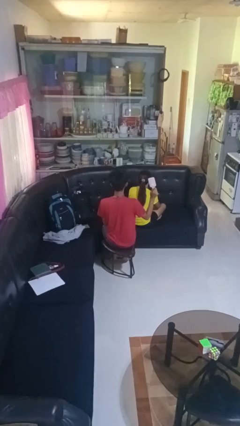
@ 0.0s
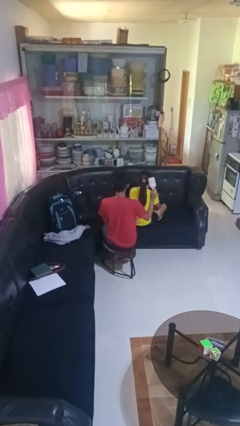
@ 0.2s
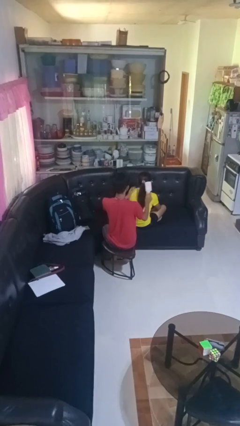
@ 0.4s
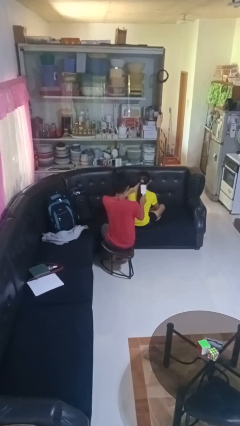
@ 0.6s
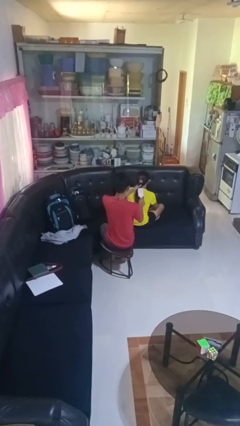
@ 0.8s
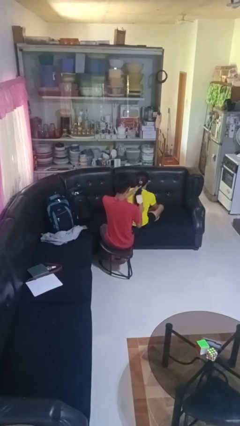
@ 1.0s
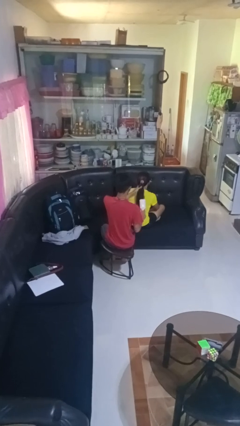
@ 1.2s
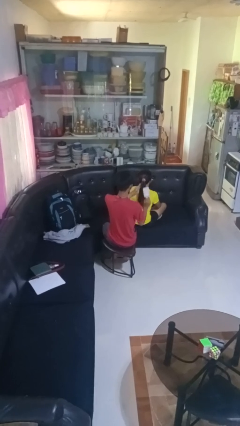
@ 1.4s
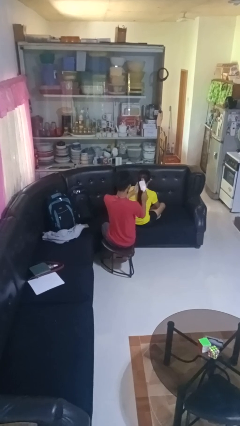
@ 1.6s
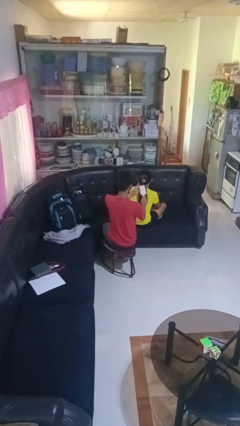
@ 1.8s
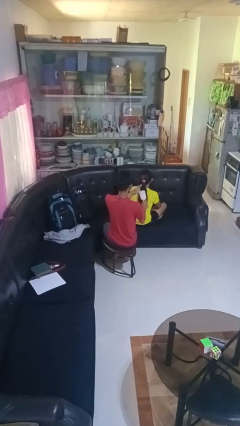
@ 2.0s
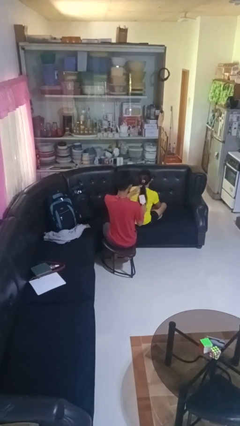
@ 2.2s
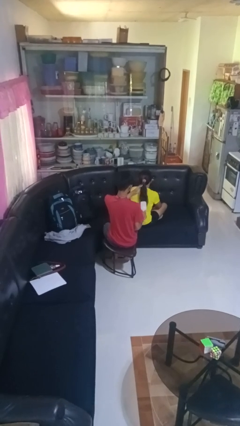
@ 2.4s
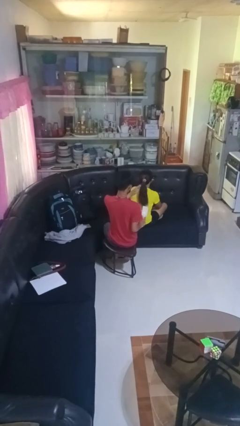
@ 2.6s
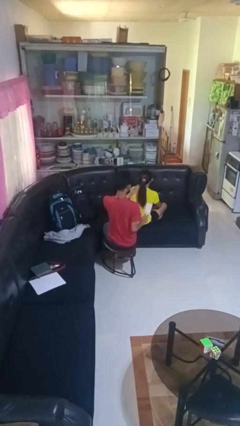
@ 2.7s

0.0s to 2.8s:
person brushes hair of person

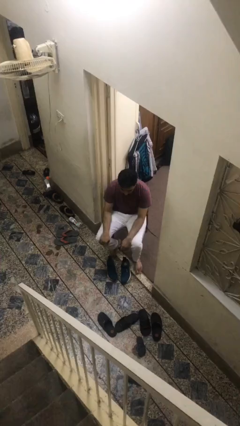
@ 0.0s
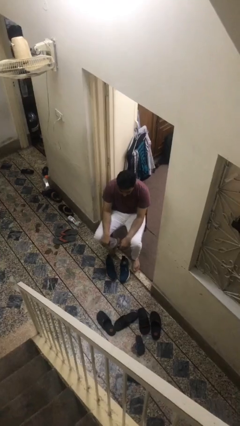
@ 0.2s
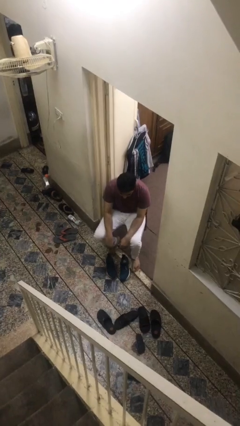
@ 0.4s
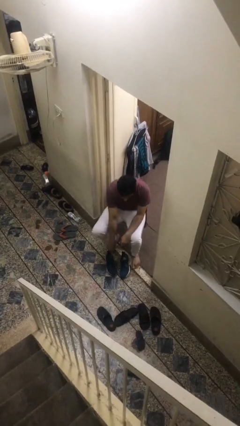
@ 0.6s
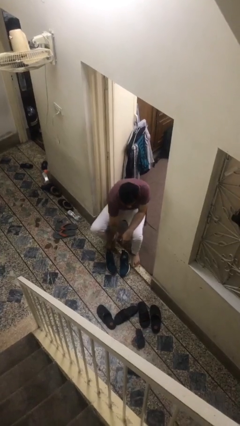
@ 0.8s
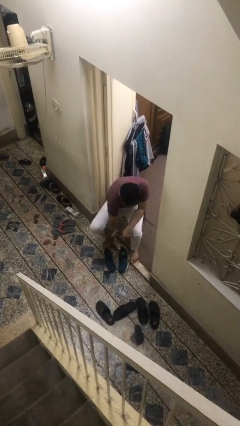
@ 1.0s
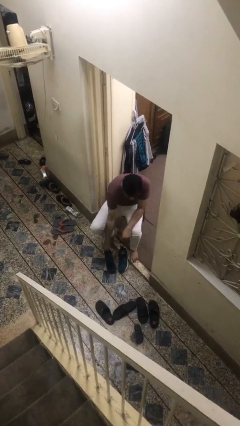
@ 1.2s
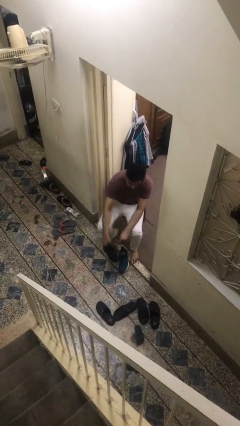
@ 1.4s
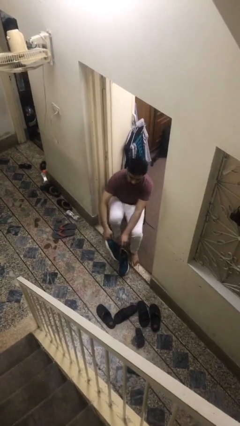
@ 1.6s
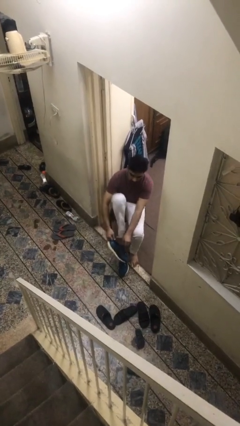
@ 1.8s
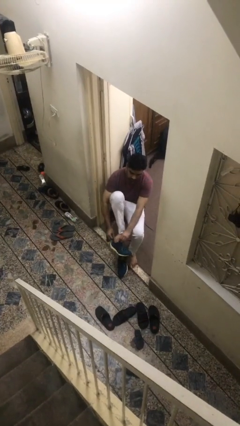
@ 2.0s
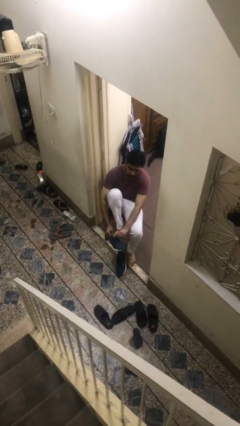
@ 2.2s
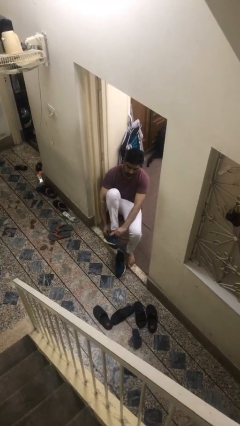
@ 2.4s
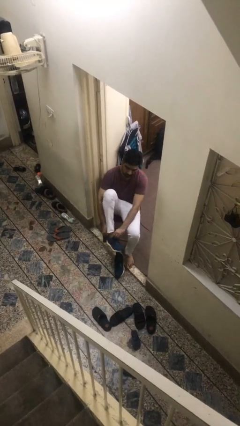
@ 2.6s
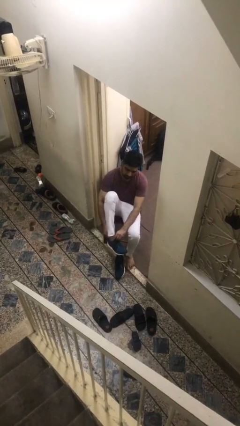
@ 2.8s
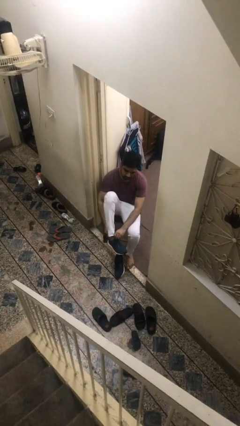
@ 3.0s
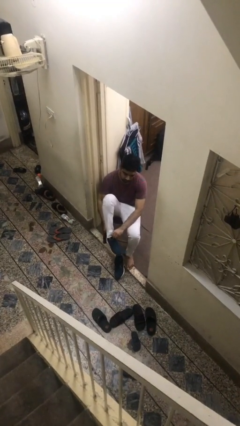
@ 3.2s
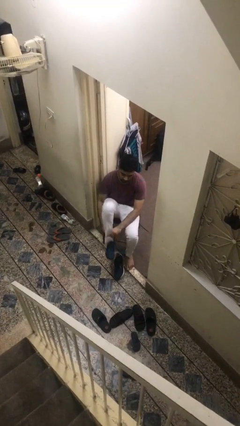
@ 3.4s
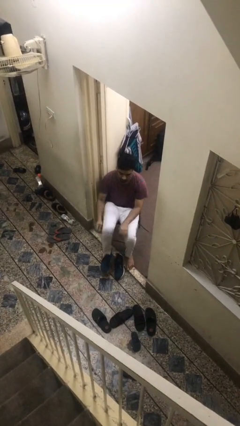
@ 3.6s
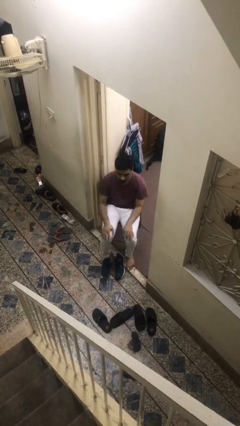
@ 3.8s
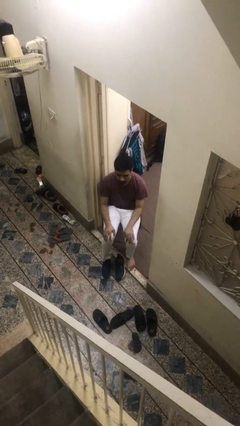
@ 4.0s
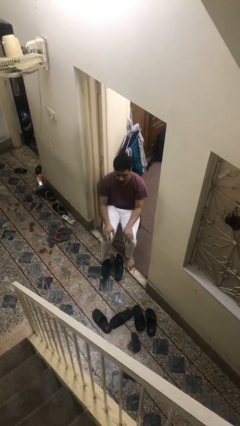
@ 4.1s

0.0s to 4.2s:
person puts on shoes

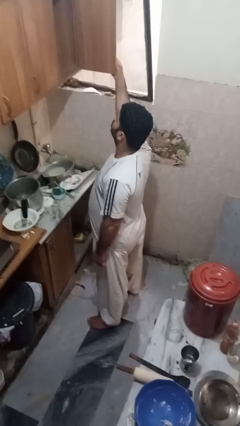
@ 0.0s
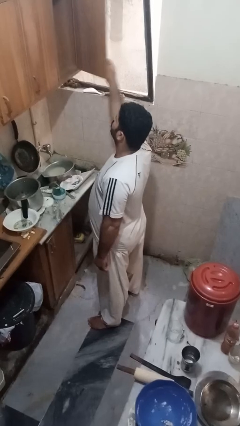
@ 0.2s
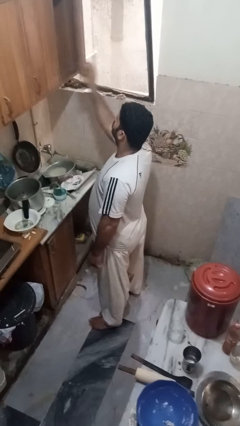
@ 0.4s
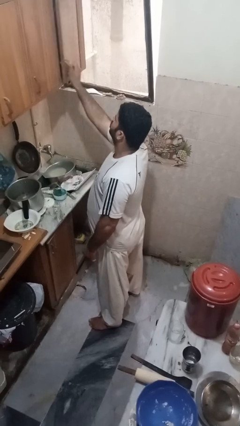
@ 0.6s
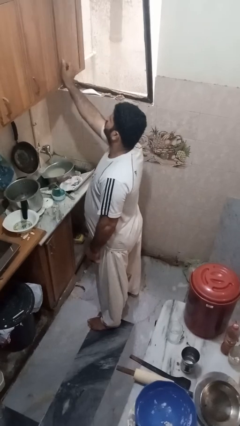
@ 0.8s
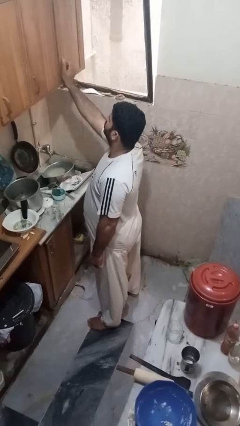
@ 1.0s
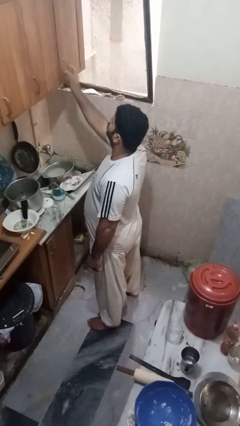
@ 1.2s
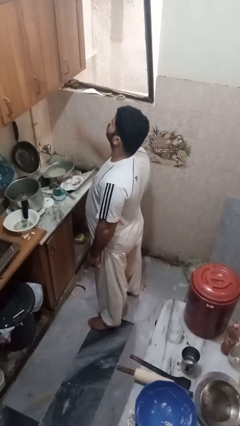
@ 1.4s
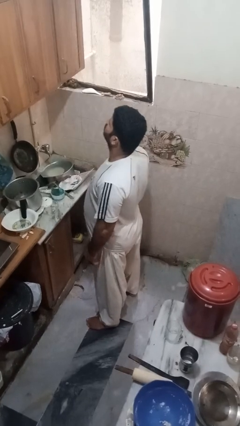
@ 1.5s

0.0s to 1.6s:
person closes cabinet

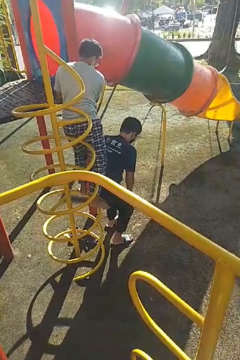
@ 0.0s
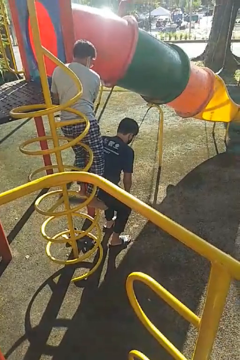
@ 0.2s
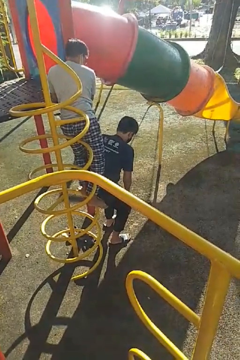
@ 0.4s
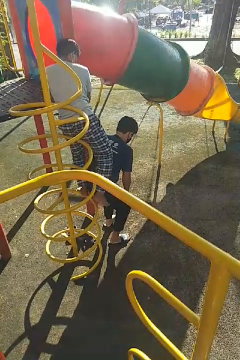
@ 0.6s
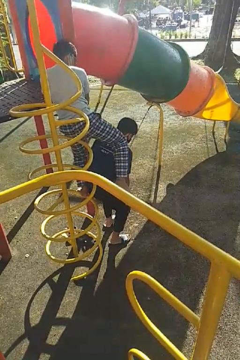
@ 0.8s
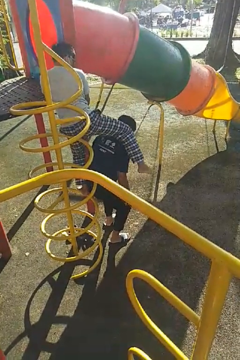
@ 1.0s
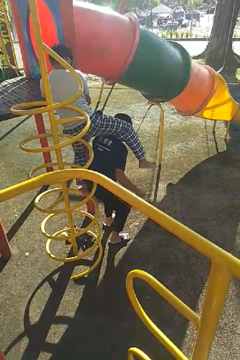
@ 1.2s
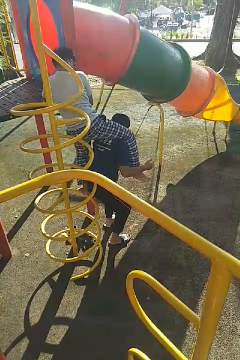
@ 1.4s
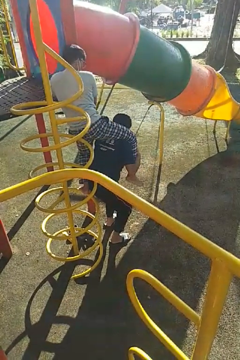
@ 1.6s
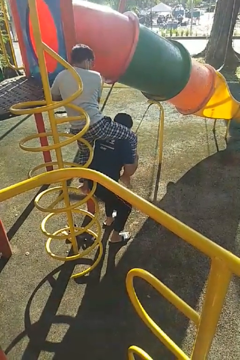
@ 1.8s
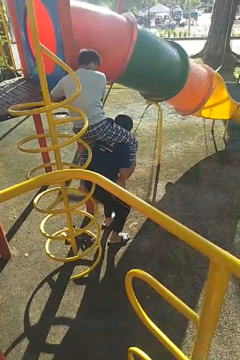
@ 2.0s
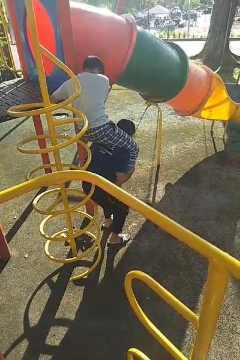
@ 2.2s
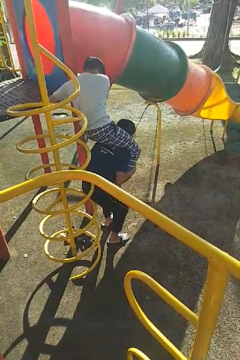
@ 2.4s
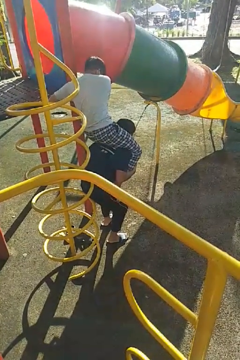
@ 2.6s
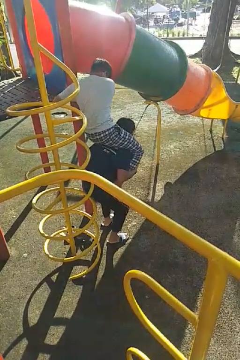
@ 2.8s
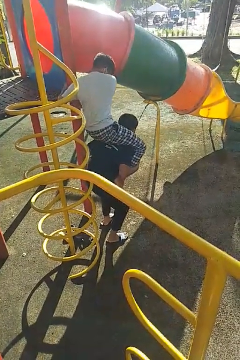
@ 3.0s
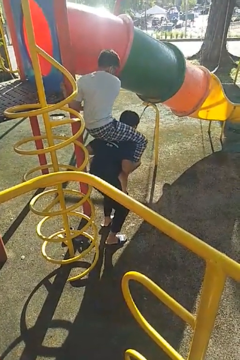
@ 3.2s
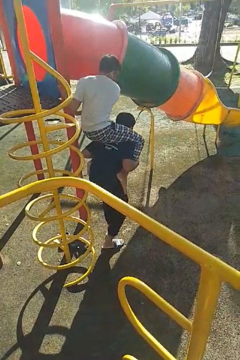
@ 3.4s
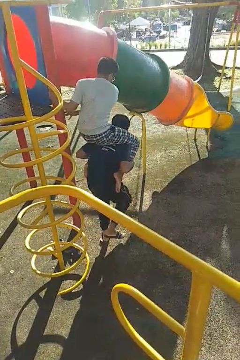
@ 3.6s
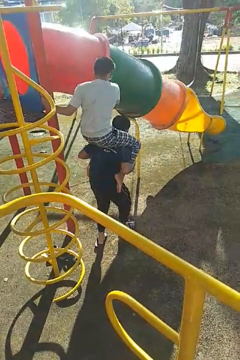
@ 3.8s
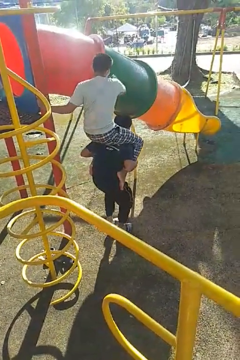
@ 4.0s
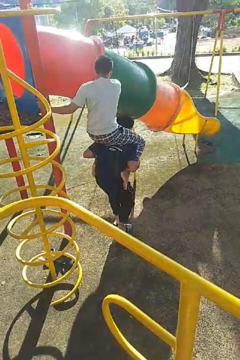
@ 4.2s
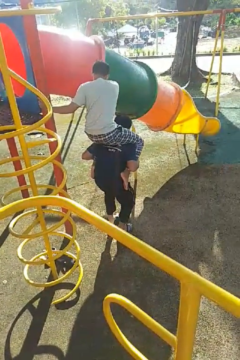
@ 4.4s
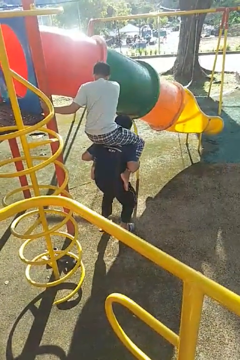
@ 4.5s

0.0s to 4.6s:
person carries person on shoulders

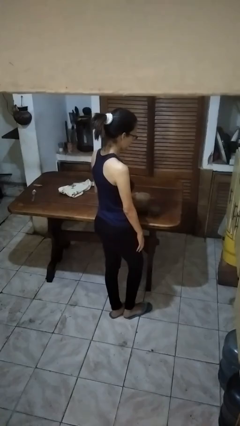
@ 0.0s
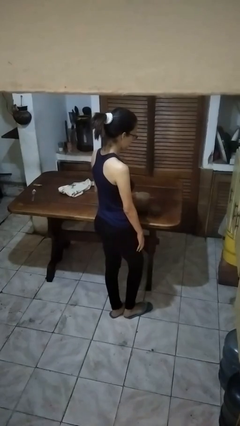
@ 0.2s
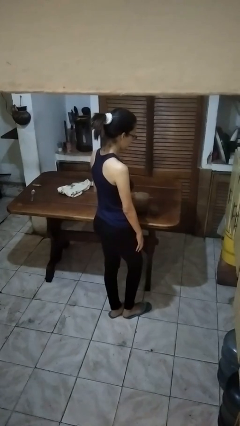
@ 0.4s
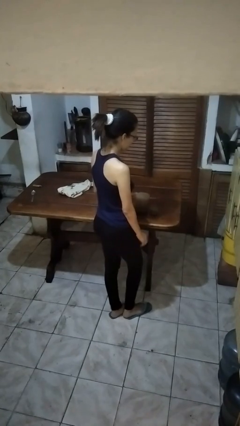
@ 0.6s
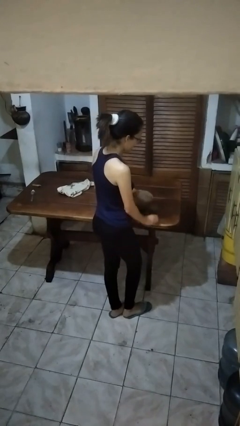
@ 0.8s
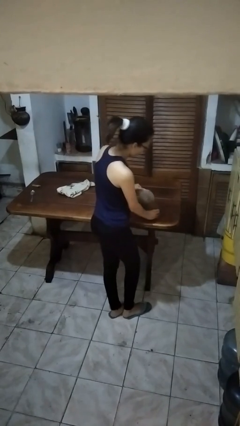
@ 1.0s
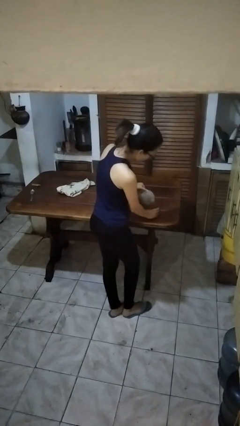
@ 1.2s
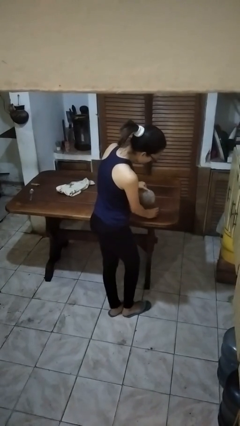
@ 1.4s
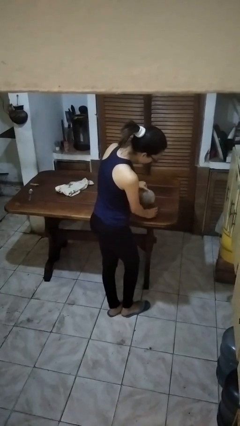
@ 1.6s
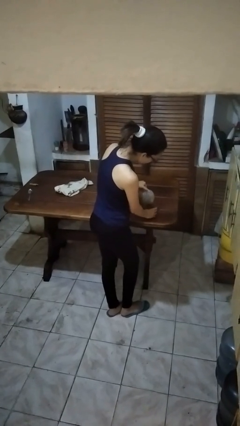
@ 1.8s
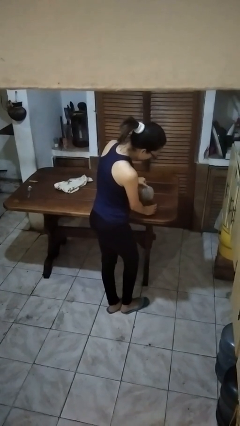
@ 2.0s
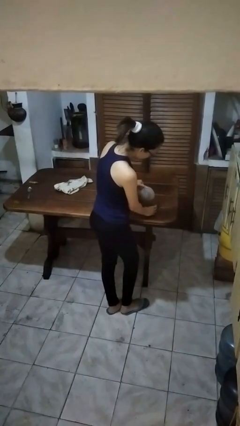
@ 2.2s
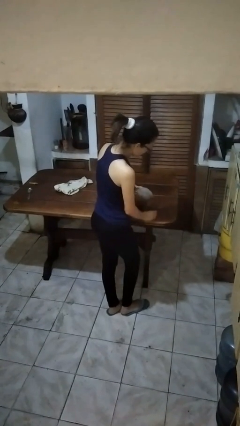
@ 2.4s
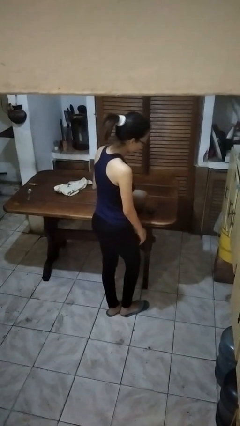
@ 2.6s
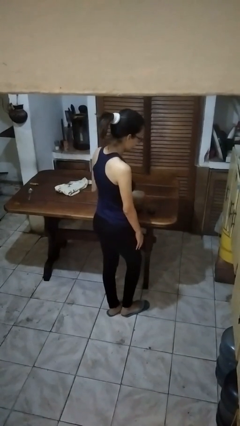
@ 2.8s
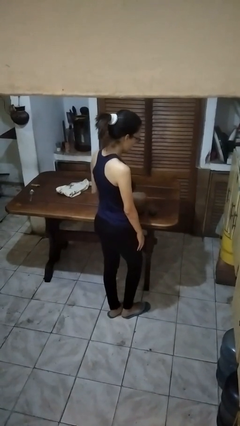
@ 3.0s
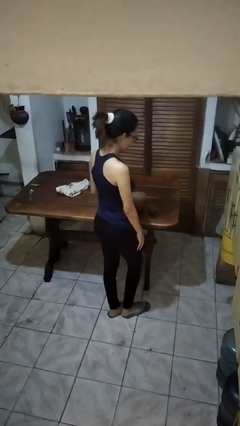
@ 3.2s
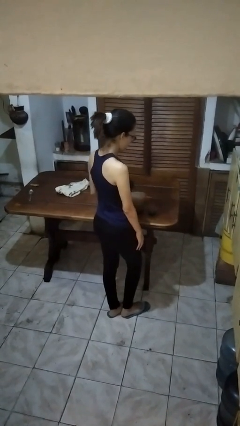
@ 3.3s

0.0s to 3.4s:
person pours coffee into mug

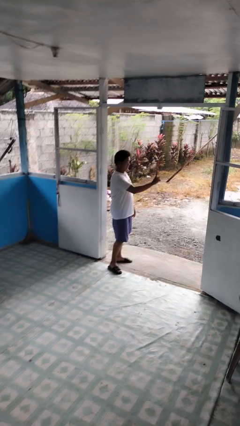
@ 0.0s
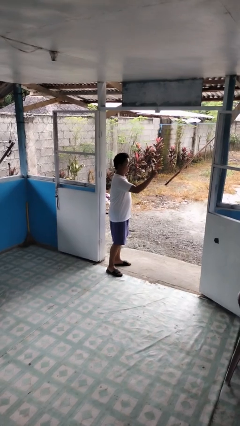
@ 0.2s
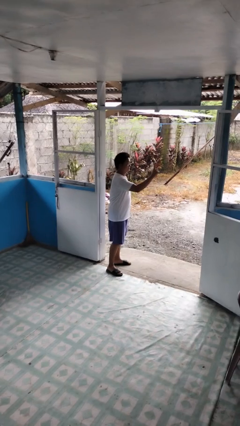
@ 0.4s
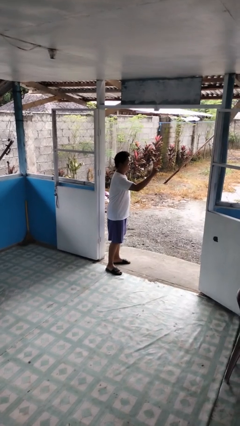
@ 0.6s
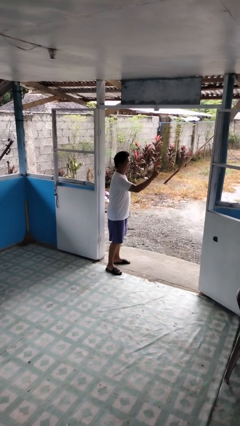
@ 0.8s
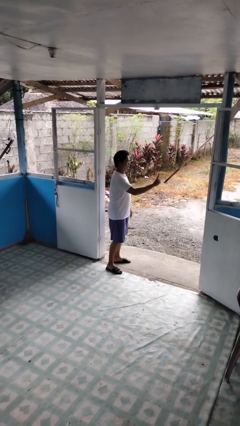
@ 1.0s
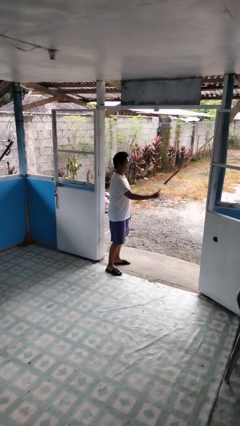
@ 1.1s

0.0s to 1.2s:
person gestures number one

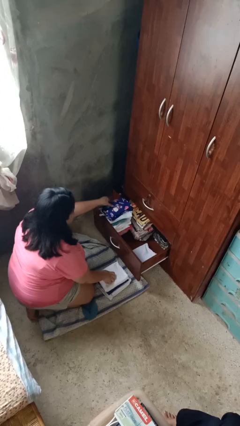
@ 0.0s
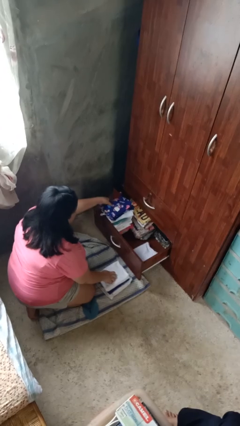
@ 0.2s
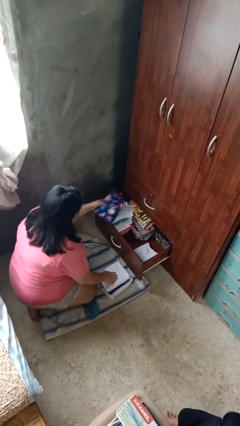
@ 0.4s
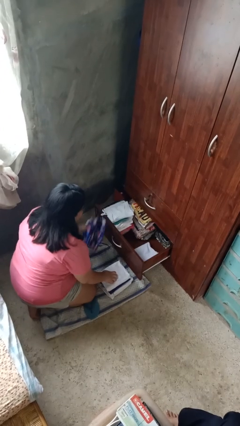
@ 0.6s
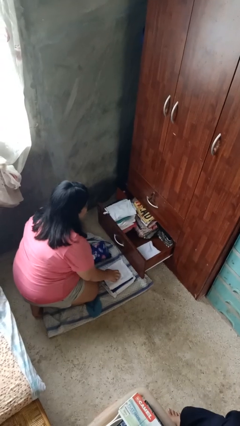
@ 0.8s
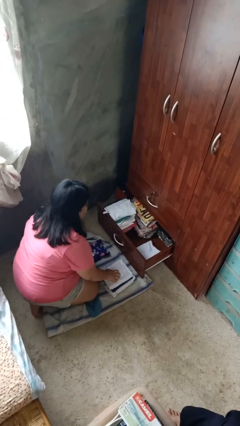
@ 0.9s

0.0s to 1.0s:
person takes clothes from dresser
